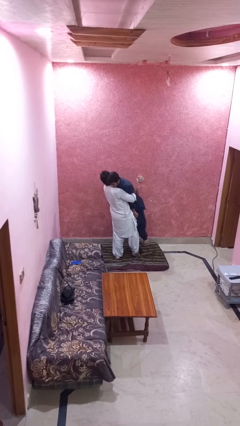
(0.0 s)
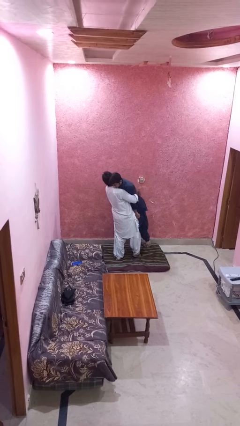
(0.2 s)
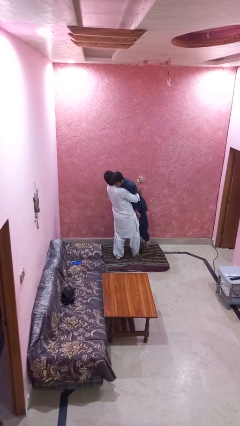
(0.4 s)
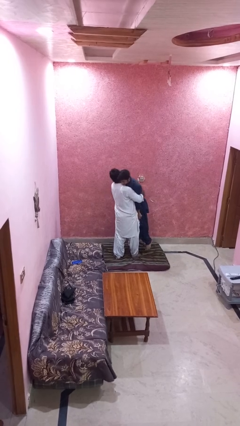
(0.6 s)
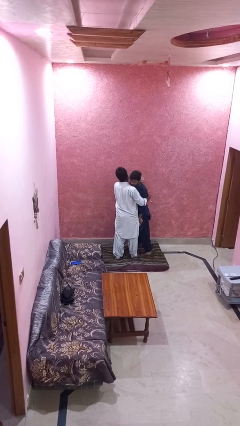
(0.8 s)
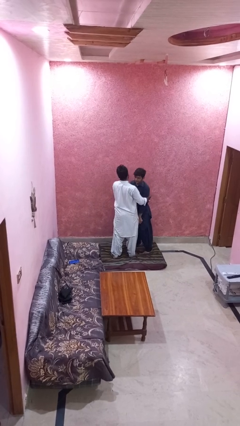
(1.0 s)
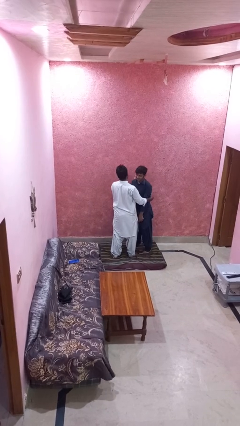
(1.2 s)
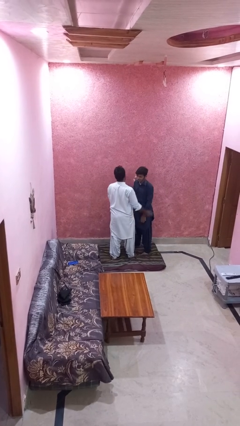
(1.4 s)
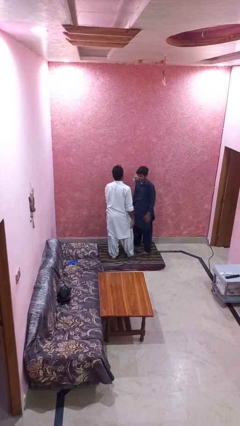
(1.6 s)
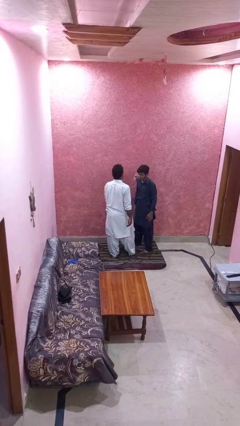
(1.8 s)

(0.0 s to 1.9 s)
person puts down person

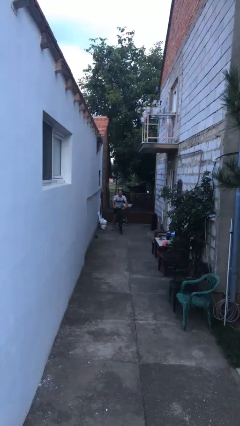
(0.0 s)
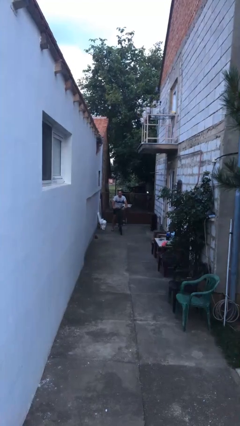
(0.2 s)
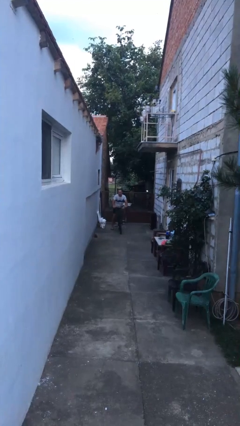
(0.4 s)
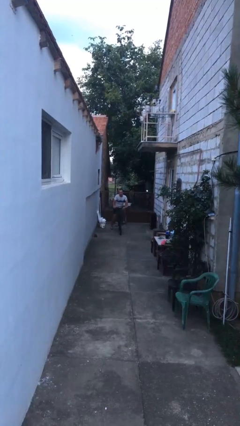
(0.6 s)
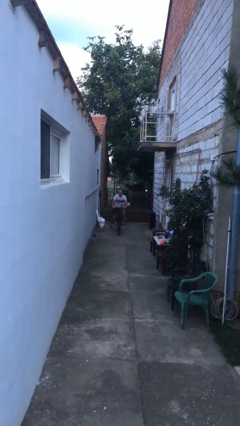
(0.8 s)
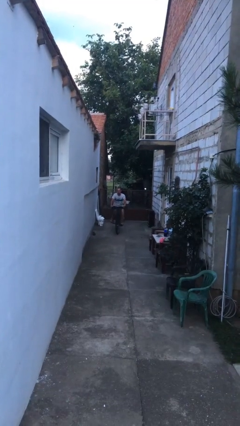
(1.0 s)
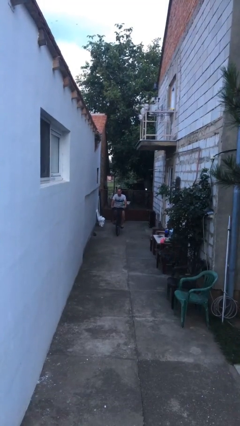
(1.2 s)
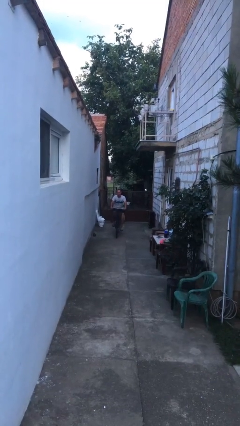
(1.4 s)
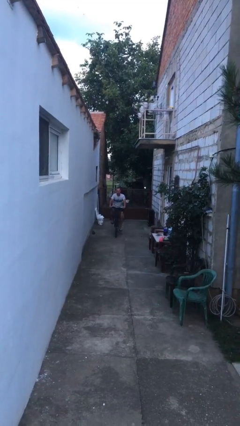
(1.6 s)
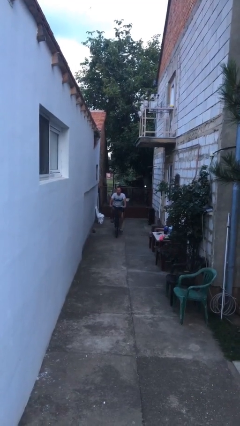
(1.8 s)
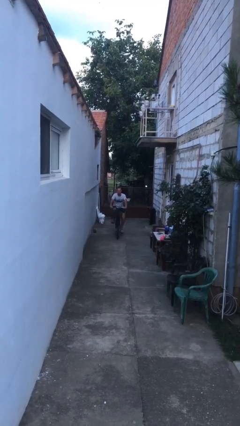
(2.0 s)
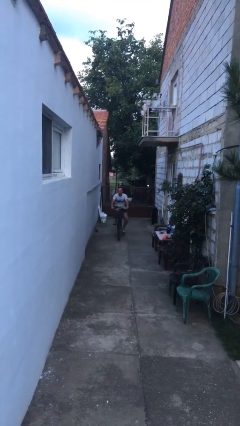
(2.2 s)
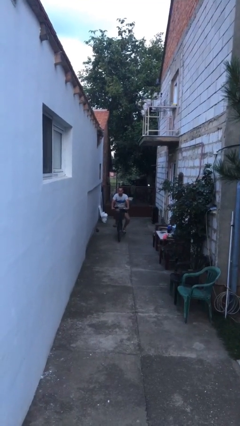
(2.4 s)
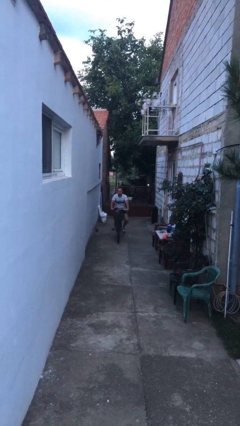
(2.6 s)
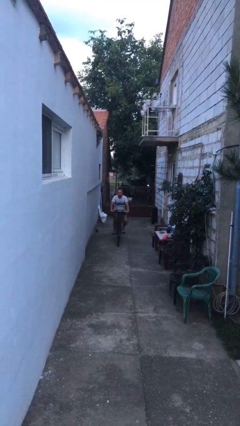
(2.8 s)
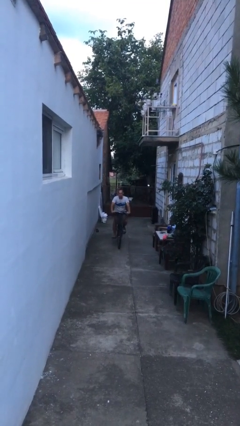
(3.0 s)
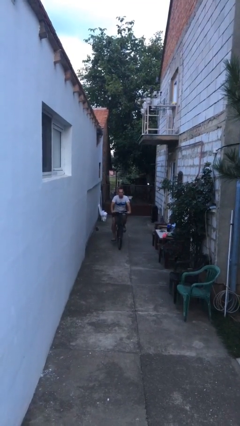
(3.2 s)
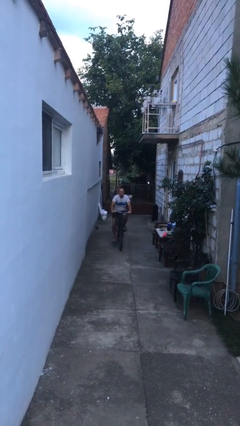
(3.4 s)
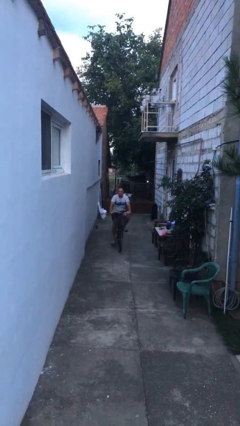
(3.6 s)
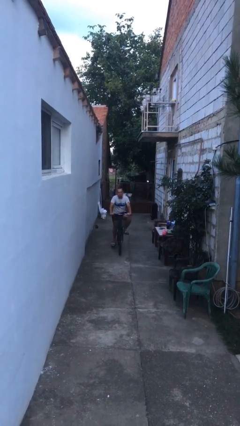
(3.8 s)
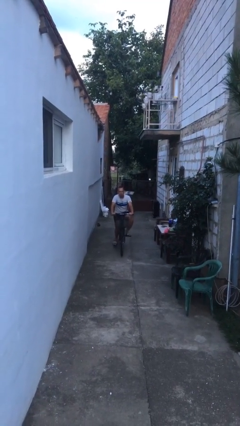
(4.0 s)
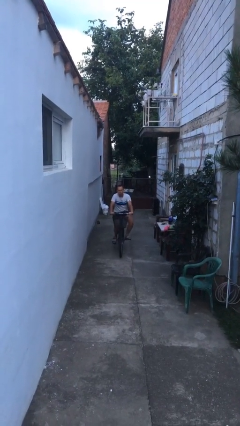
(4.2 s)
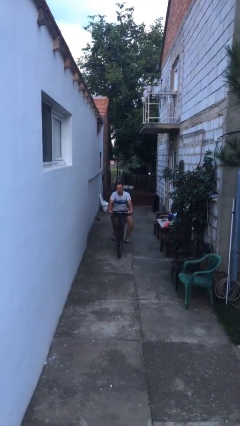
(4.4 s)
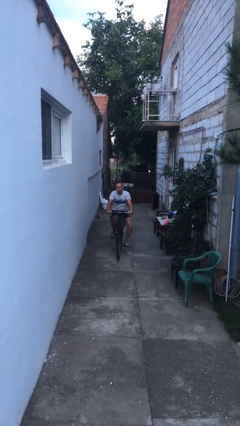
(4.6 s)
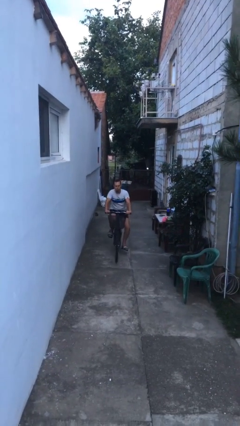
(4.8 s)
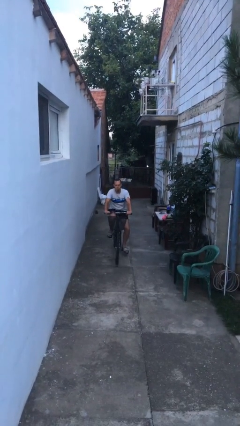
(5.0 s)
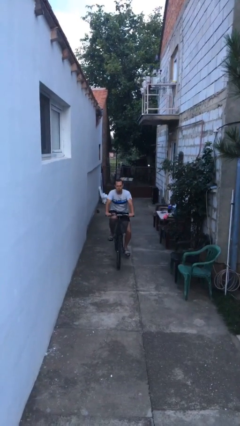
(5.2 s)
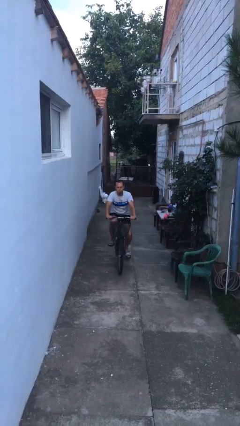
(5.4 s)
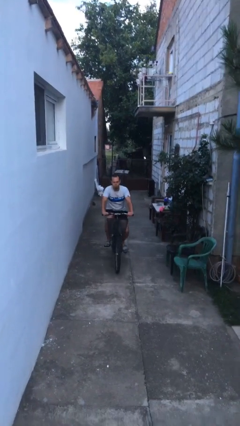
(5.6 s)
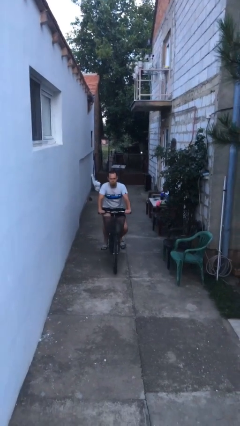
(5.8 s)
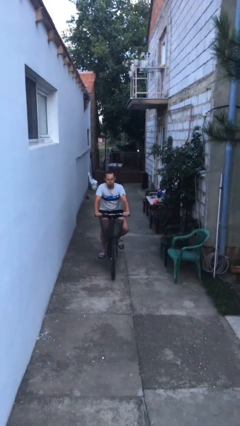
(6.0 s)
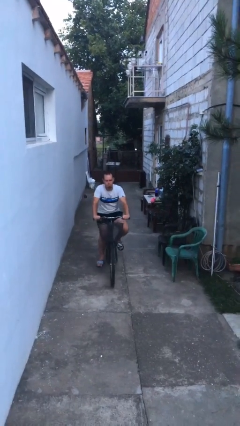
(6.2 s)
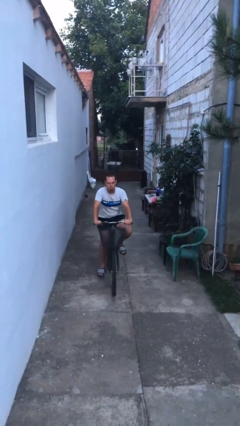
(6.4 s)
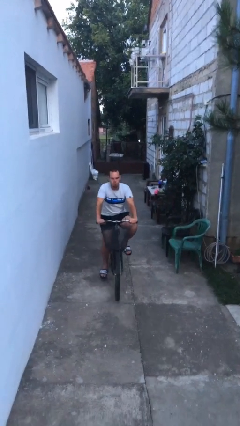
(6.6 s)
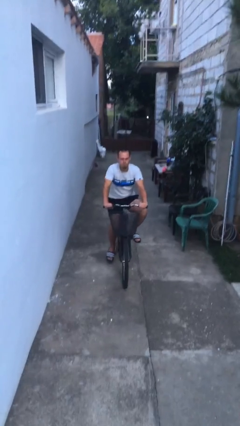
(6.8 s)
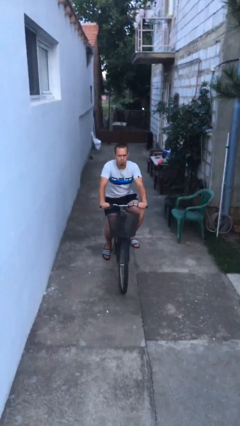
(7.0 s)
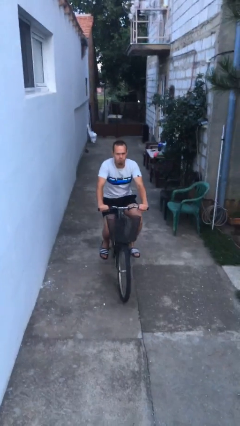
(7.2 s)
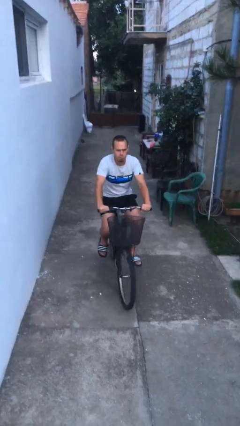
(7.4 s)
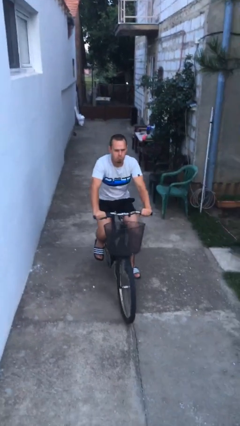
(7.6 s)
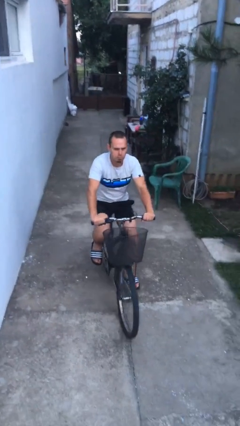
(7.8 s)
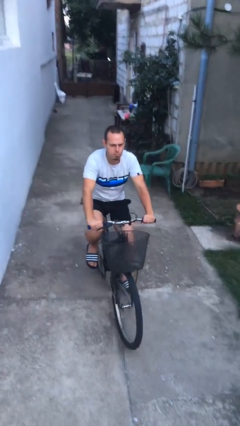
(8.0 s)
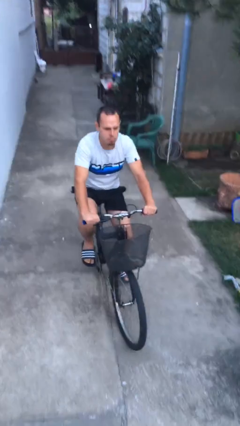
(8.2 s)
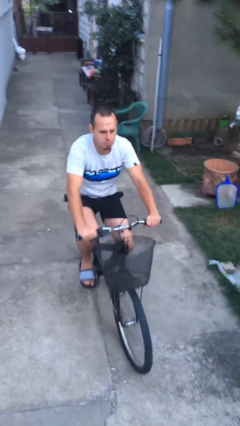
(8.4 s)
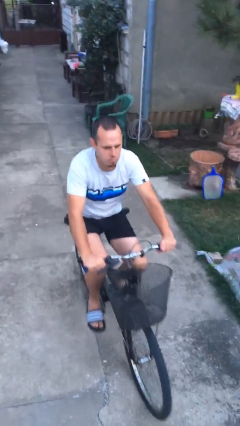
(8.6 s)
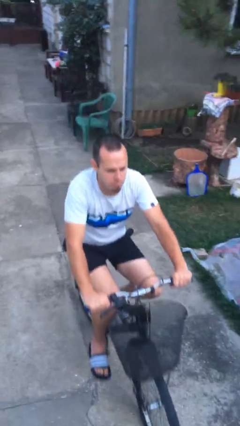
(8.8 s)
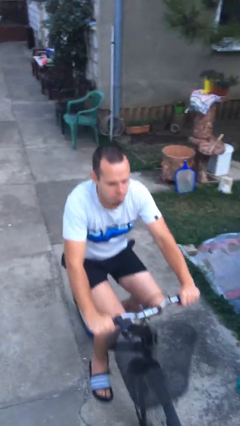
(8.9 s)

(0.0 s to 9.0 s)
person rides bicycle

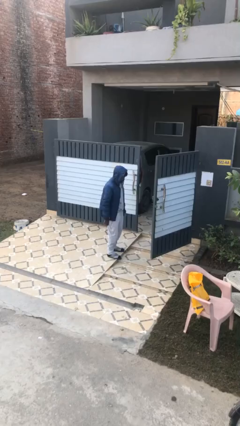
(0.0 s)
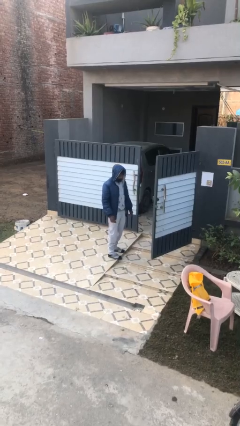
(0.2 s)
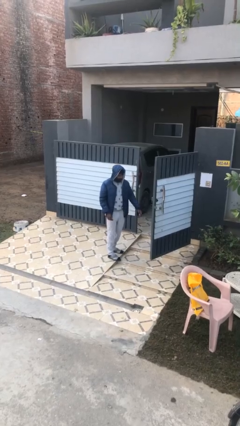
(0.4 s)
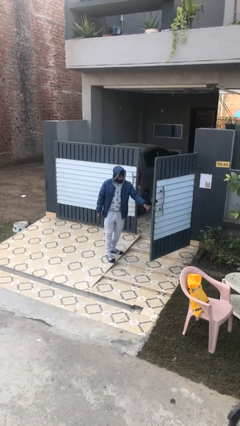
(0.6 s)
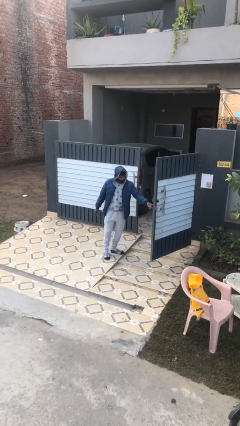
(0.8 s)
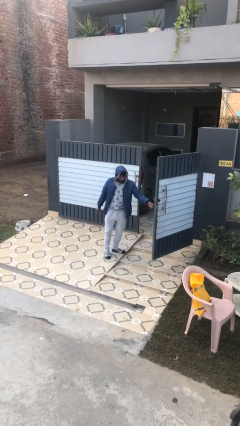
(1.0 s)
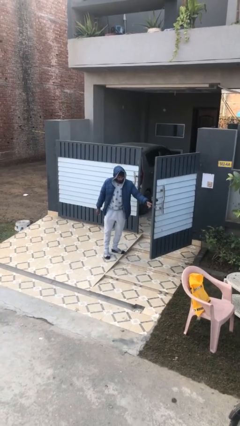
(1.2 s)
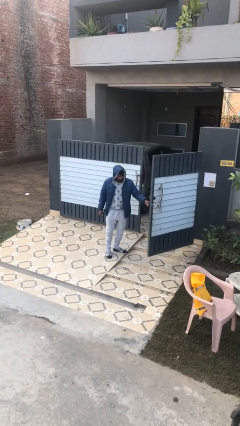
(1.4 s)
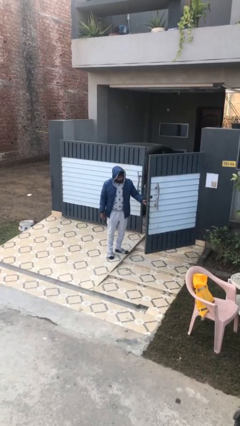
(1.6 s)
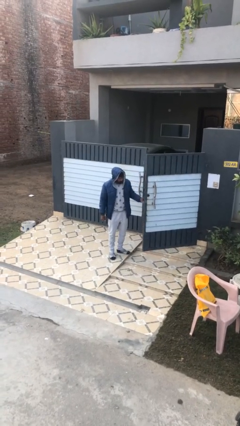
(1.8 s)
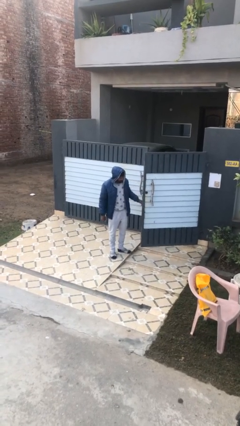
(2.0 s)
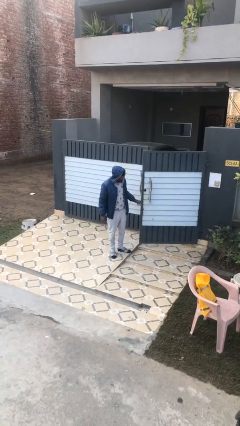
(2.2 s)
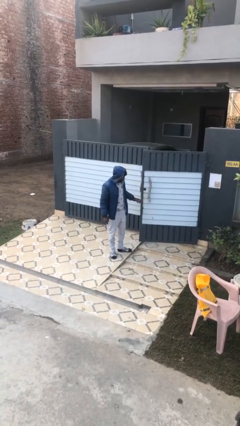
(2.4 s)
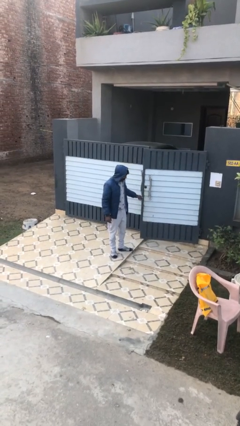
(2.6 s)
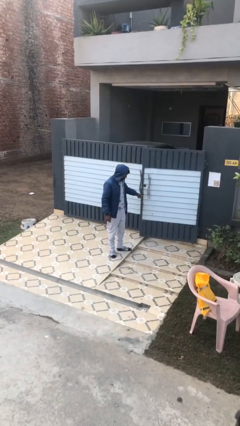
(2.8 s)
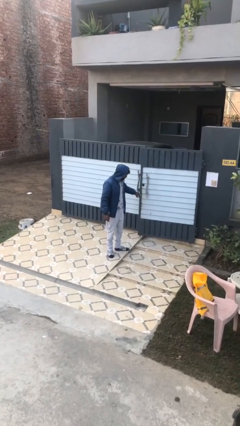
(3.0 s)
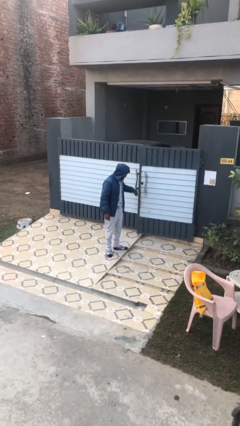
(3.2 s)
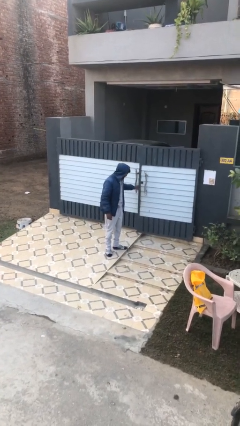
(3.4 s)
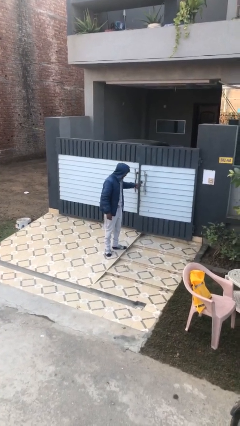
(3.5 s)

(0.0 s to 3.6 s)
person closes facility door

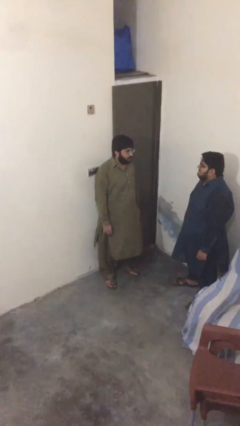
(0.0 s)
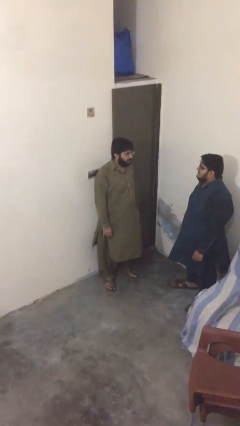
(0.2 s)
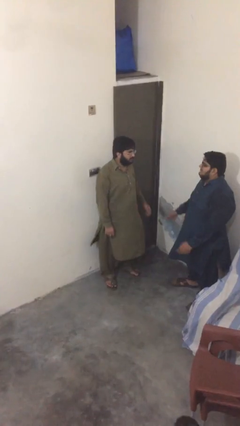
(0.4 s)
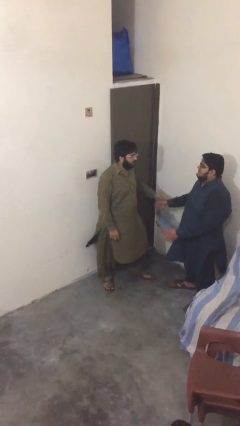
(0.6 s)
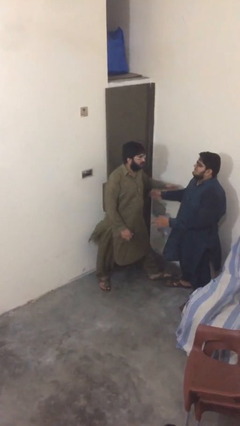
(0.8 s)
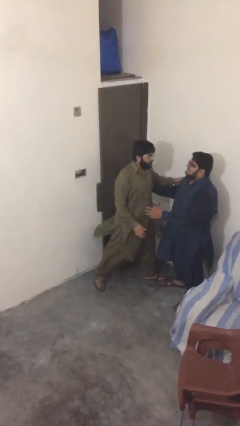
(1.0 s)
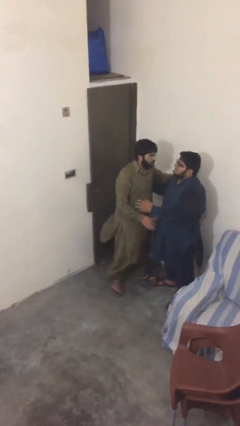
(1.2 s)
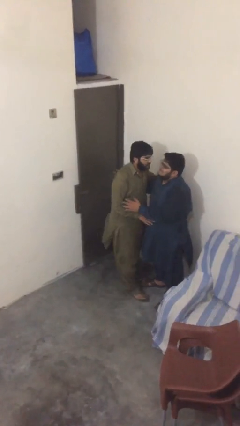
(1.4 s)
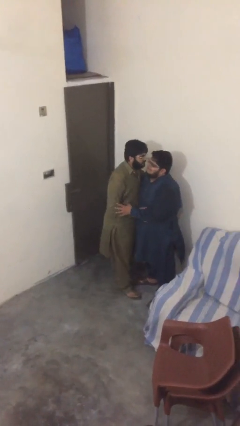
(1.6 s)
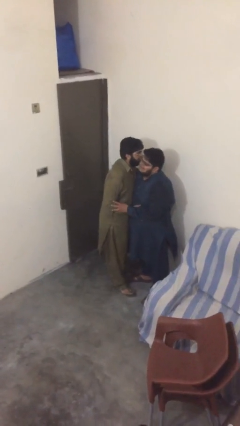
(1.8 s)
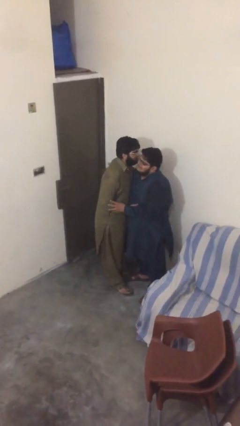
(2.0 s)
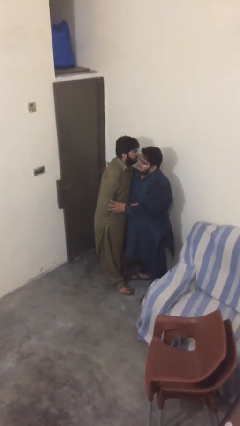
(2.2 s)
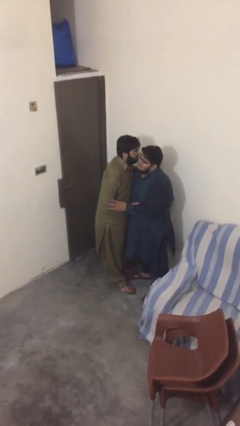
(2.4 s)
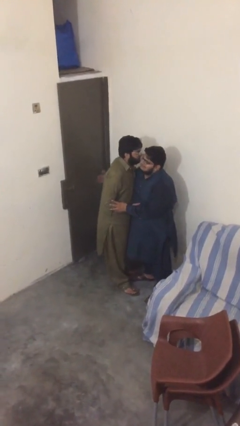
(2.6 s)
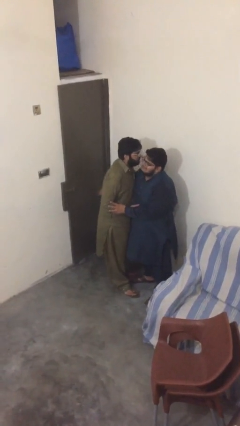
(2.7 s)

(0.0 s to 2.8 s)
person embraces person

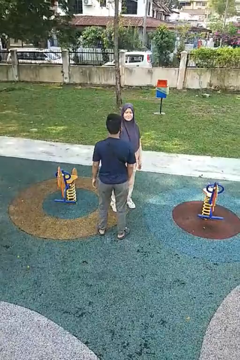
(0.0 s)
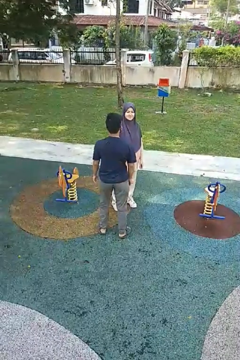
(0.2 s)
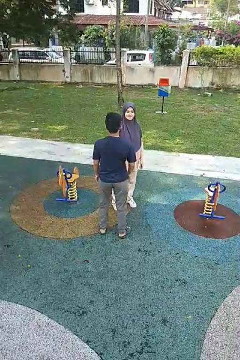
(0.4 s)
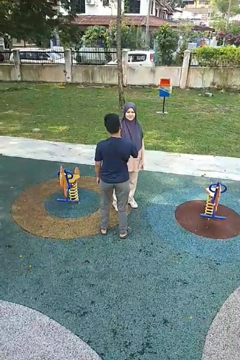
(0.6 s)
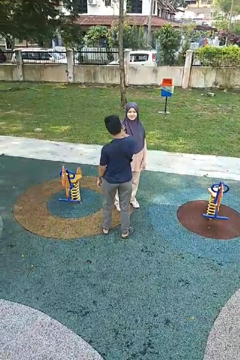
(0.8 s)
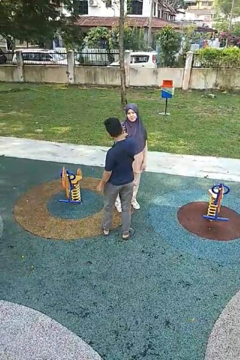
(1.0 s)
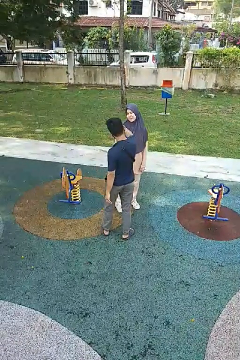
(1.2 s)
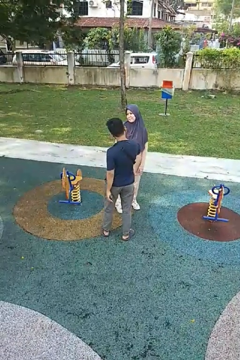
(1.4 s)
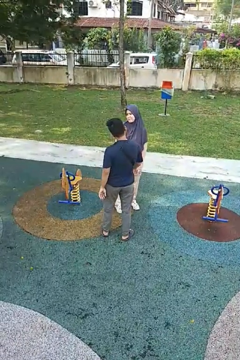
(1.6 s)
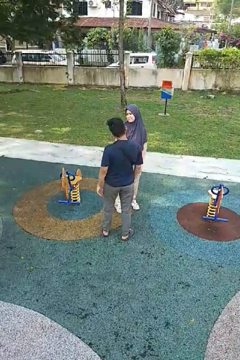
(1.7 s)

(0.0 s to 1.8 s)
person shoves person
